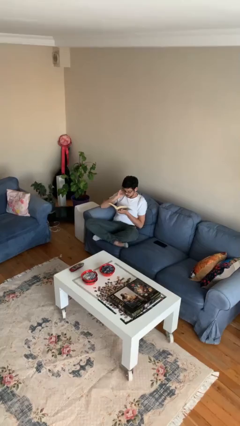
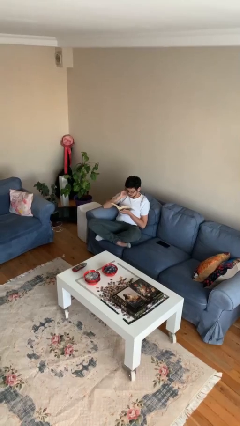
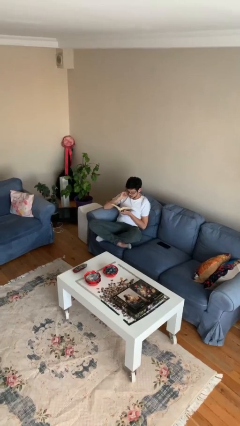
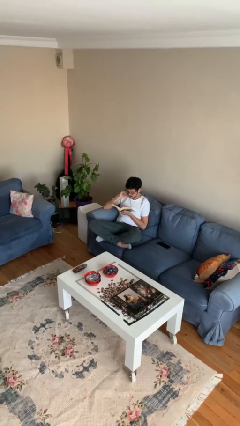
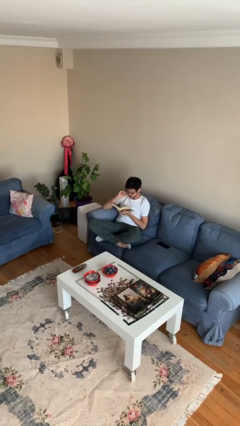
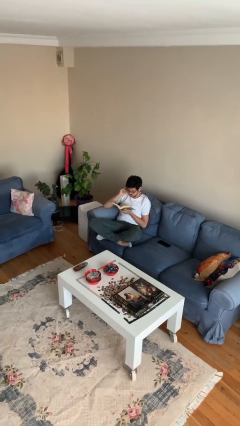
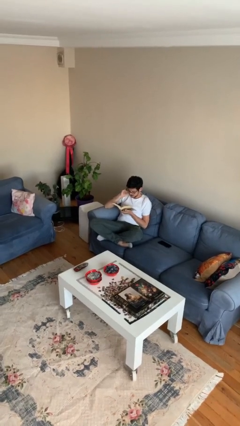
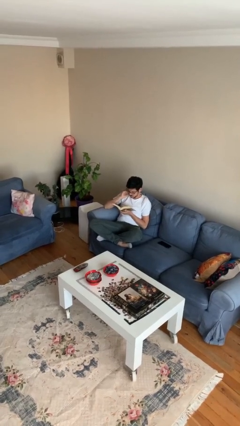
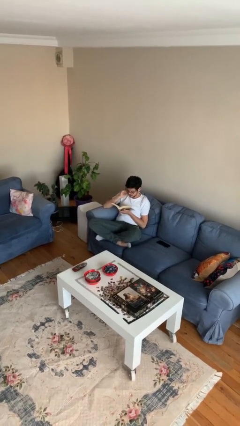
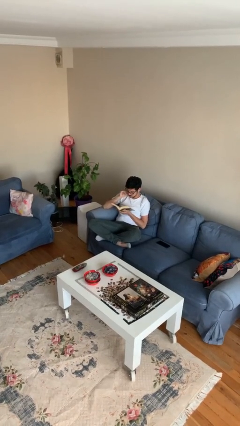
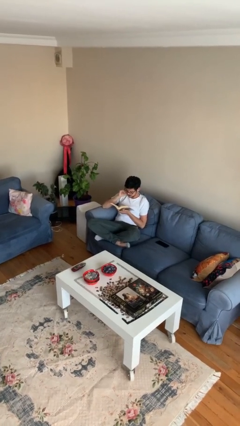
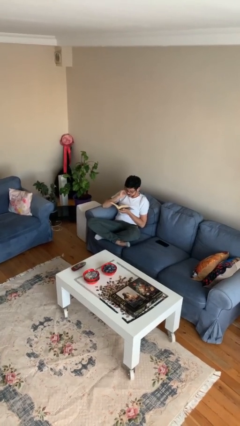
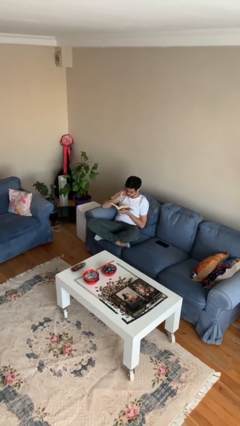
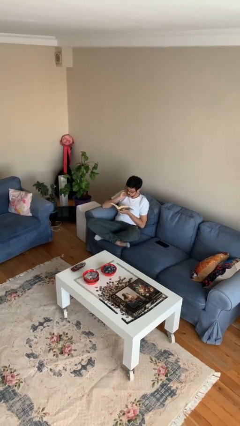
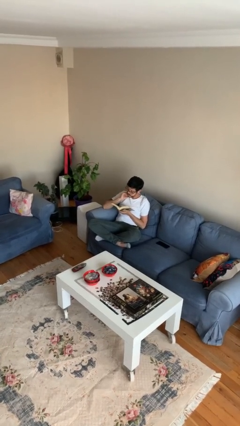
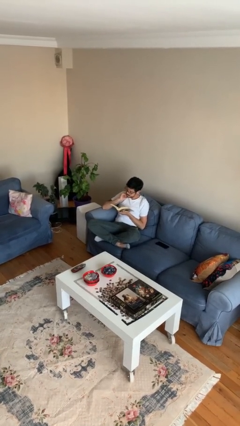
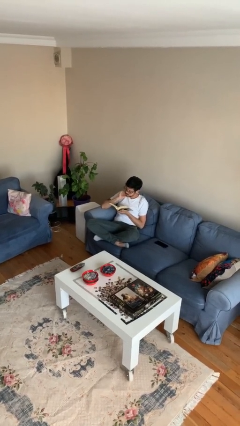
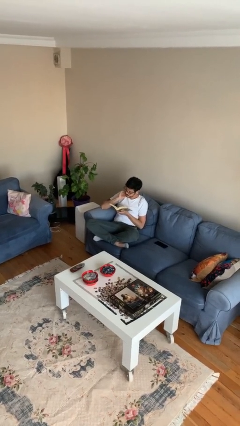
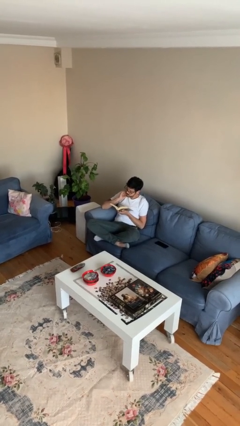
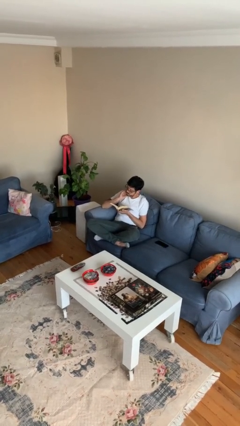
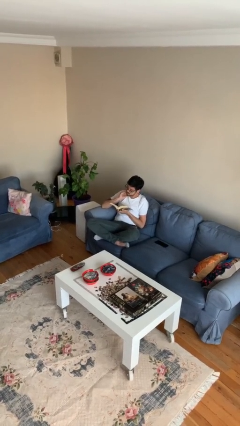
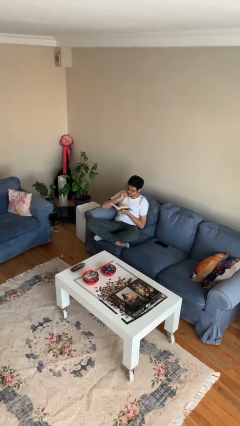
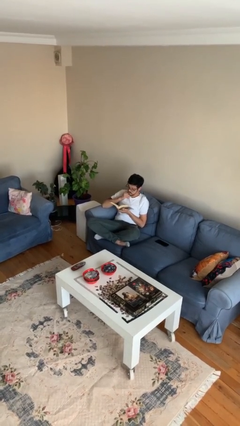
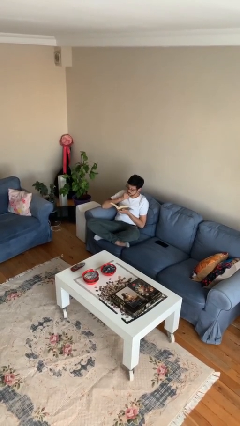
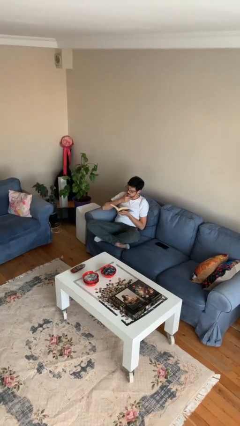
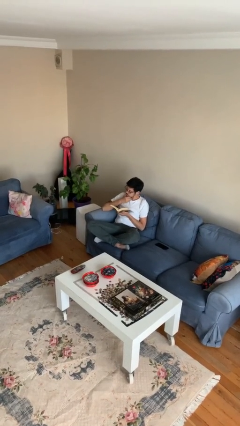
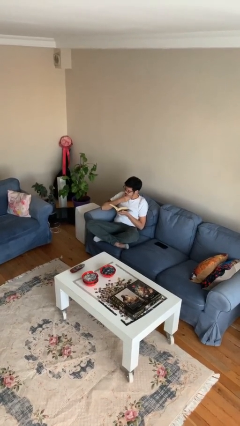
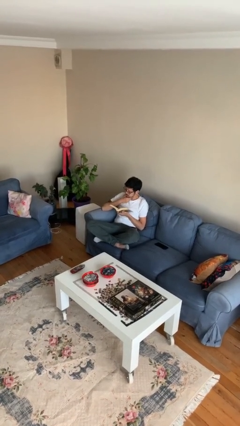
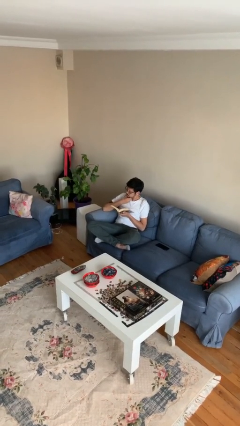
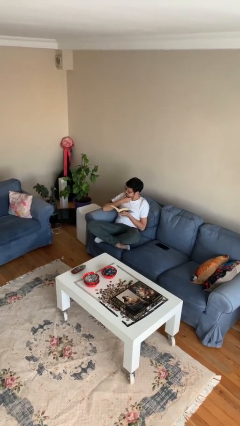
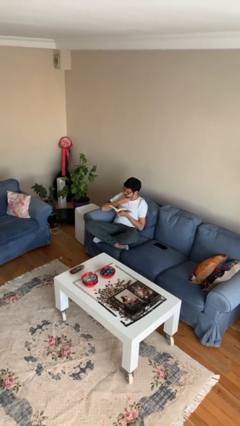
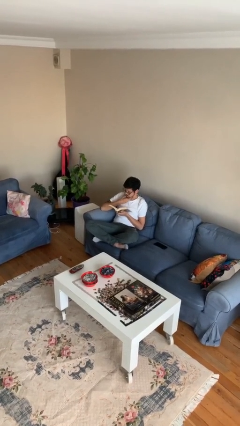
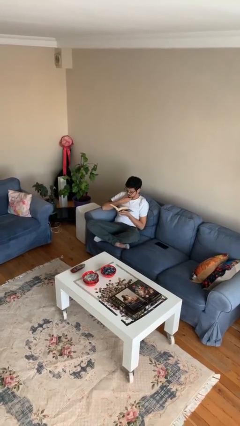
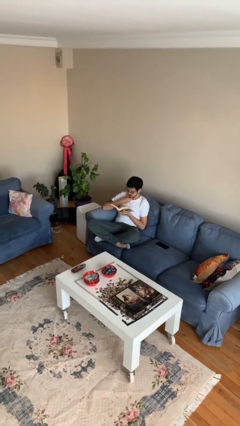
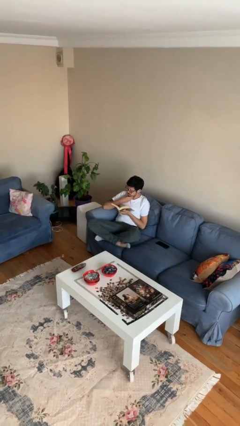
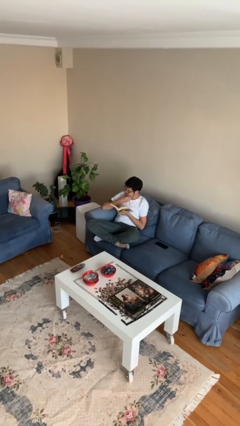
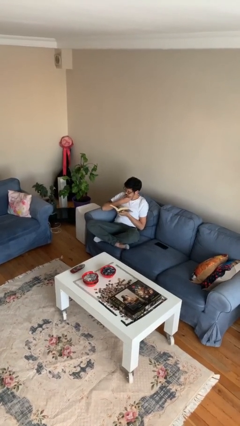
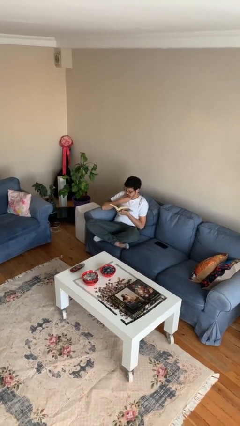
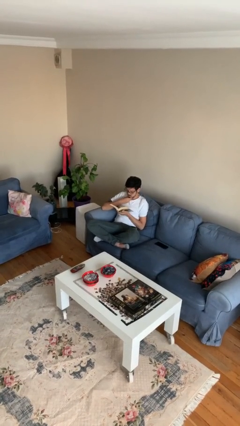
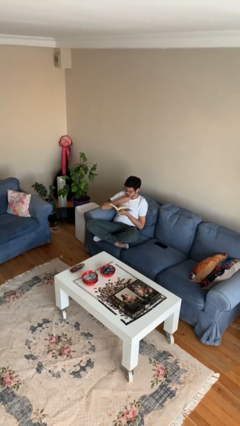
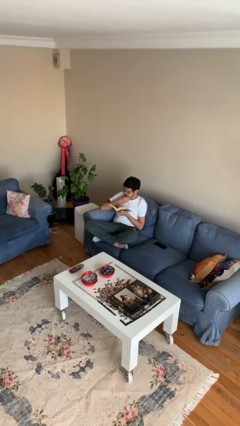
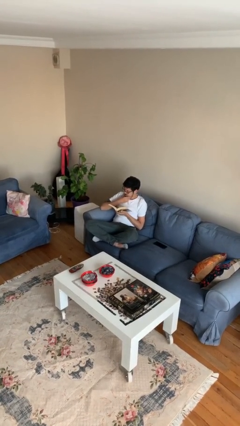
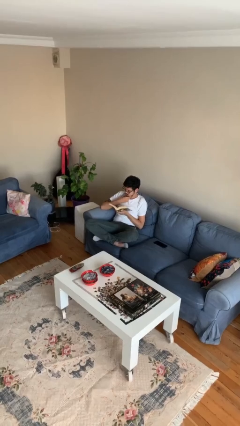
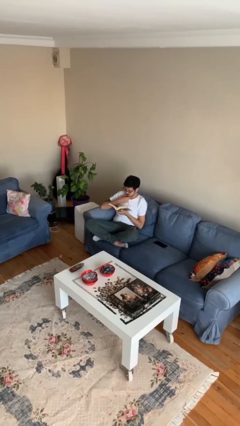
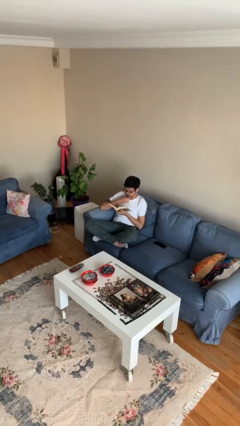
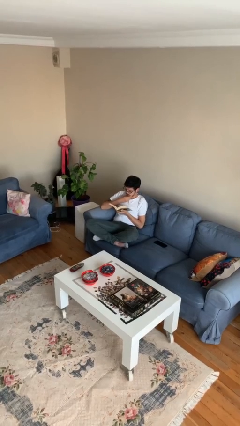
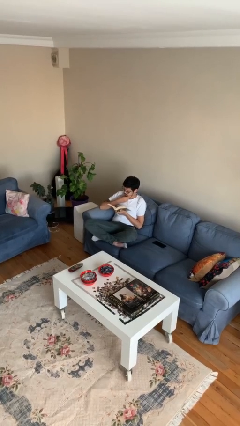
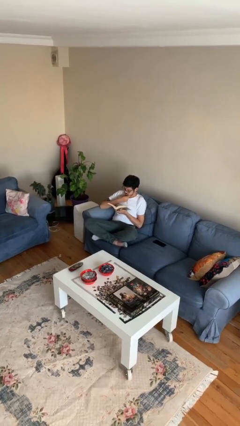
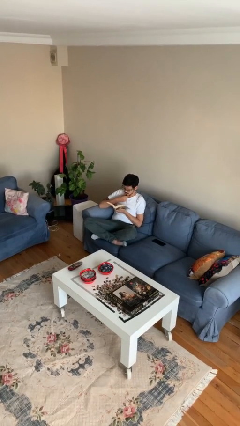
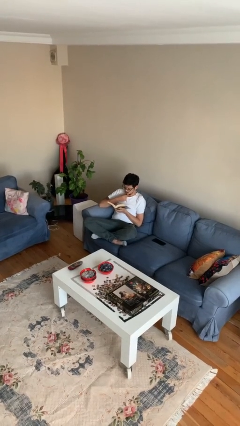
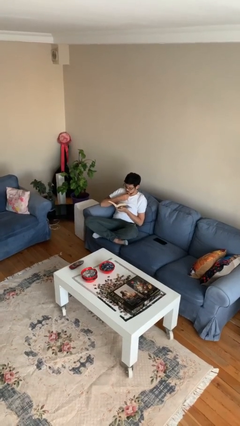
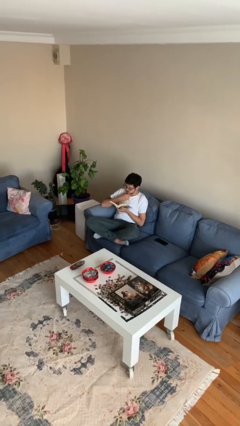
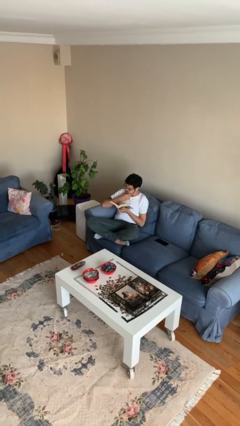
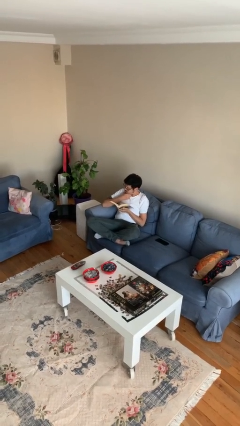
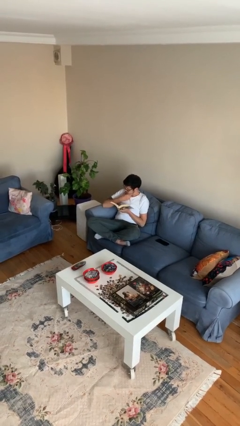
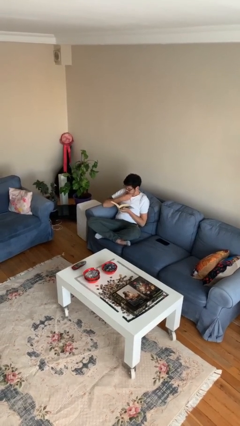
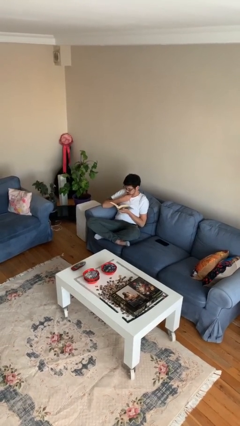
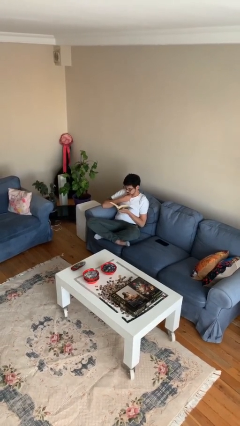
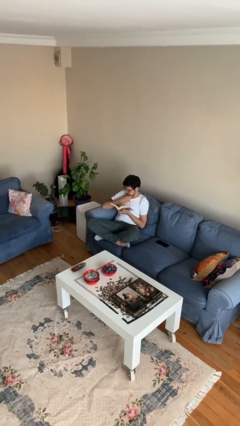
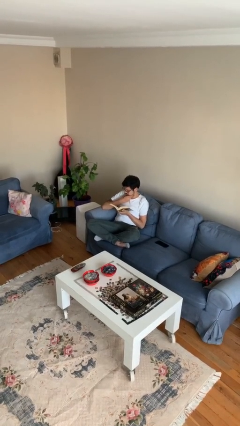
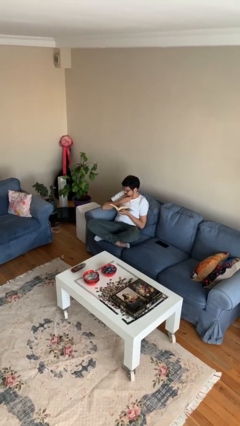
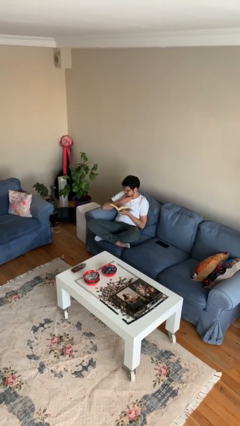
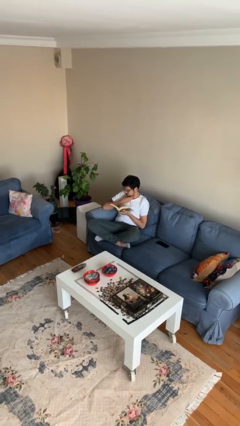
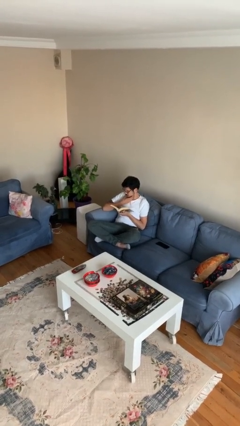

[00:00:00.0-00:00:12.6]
person reads document

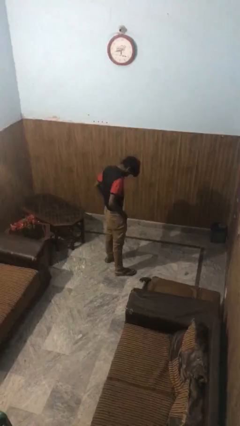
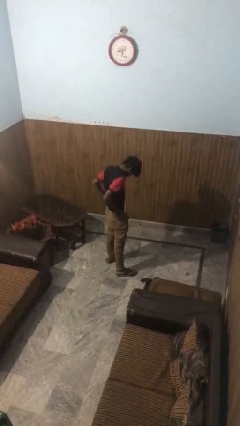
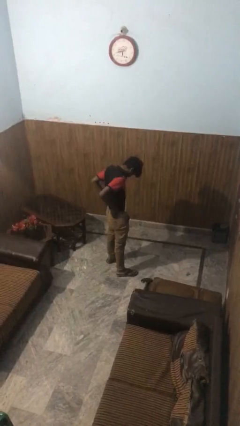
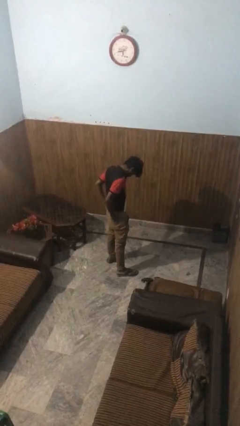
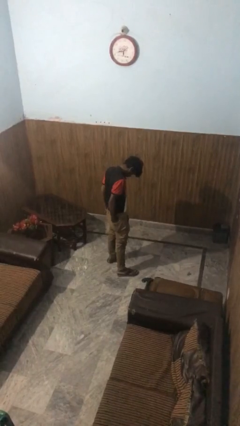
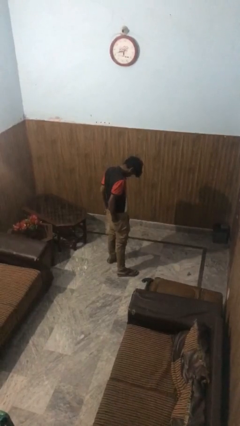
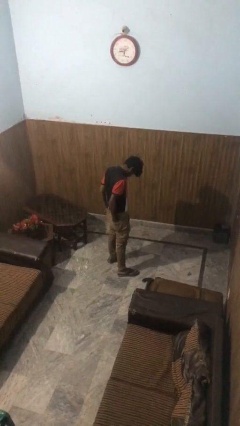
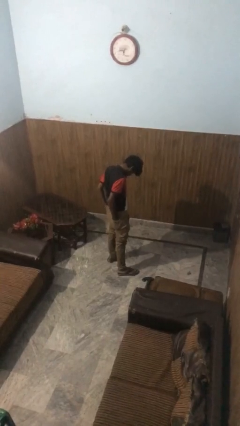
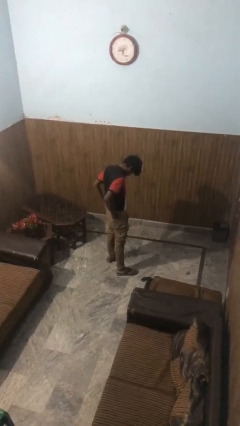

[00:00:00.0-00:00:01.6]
person puts hands in back pockets

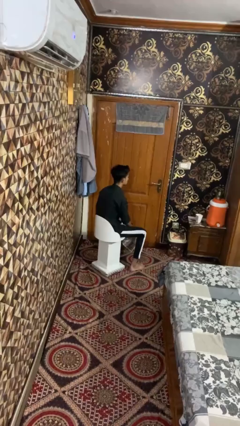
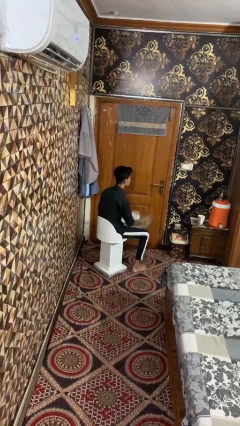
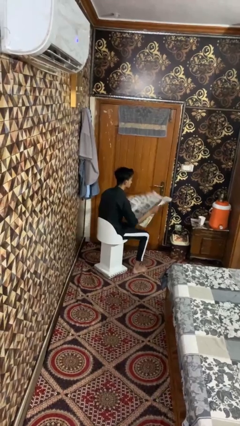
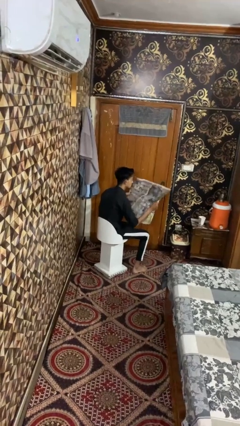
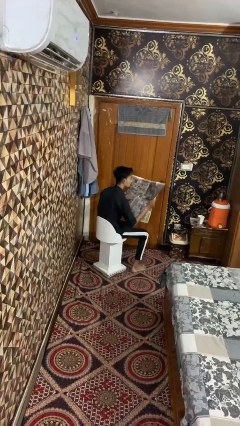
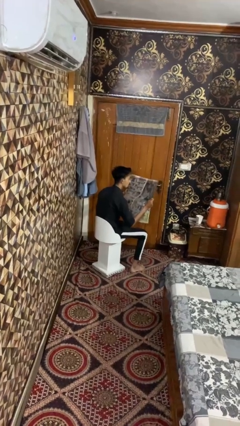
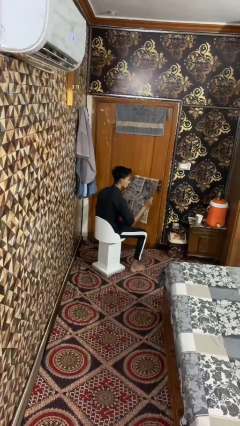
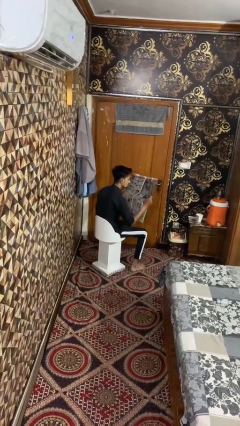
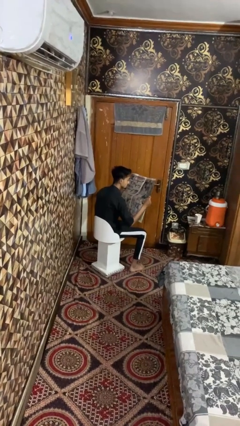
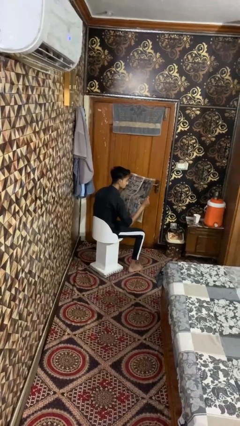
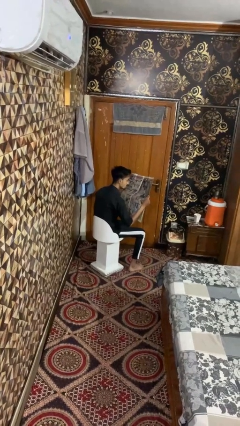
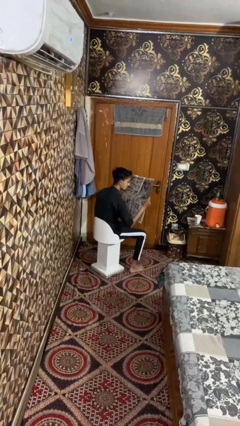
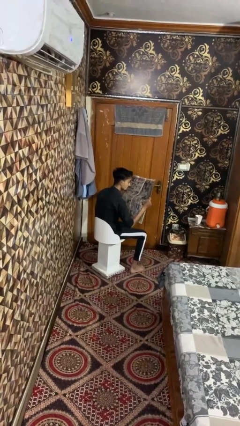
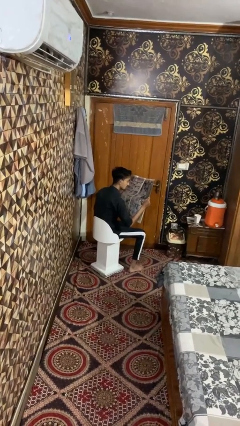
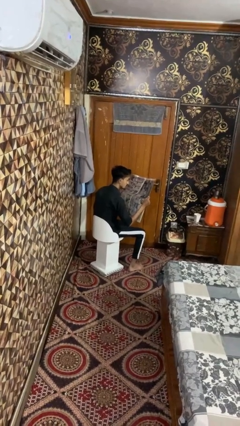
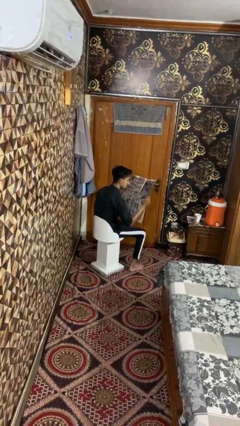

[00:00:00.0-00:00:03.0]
person reads magazine

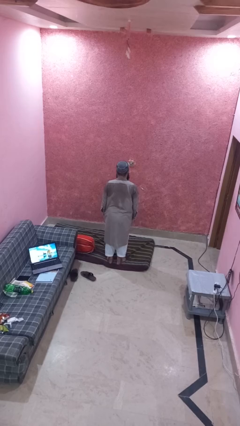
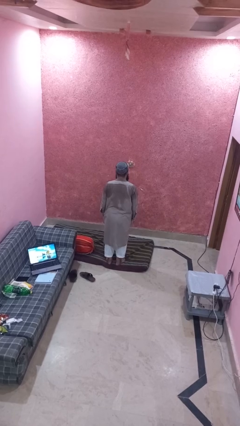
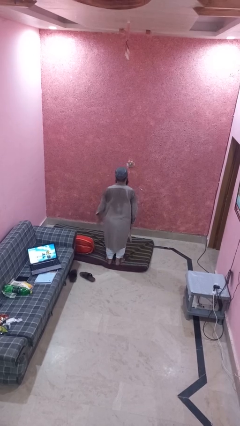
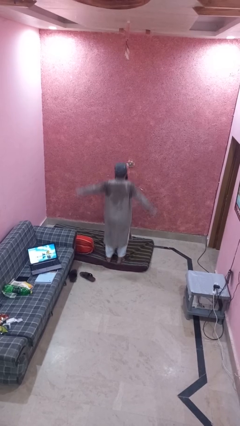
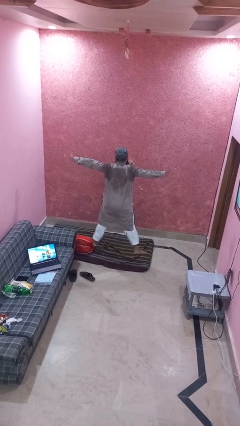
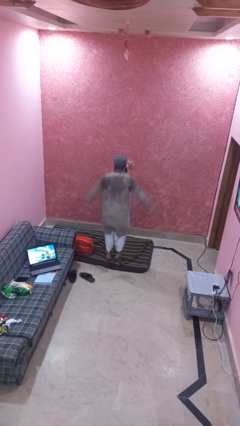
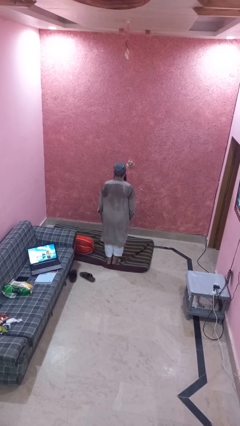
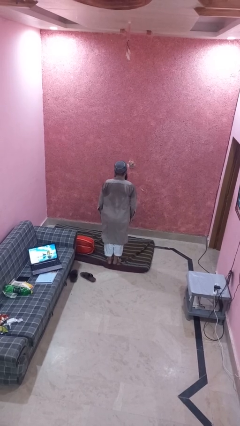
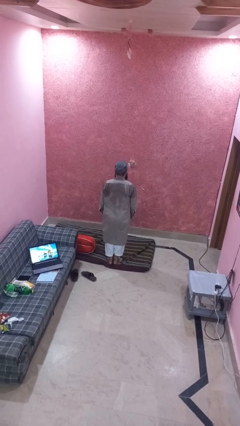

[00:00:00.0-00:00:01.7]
person exercises with jumping jacks
